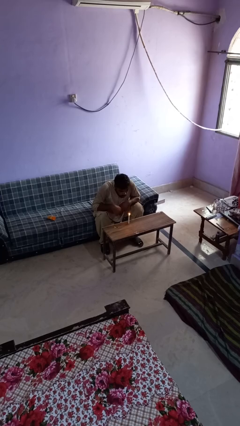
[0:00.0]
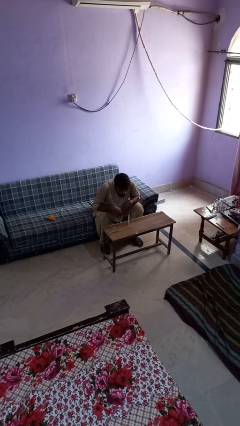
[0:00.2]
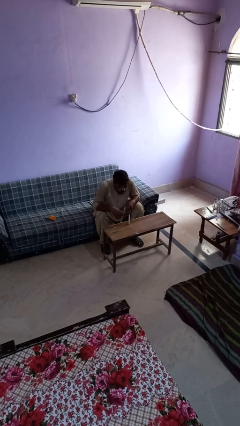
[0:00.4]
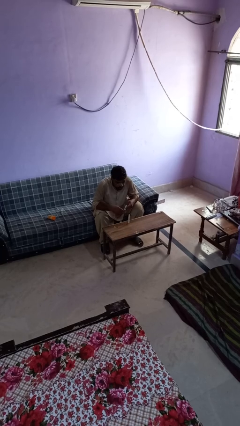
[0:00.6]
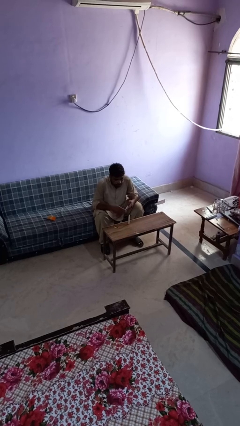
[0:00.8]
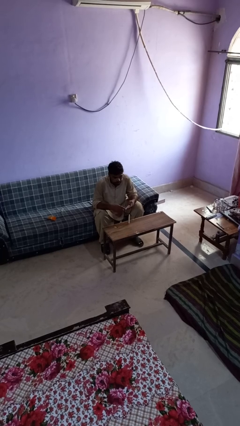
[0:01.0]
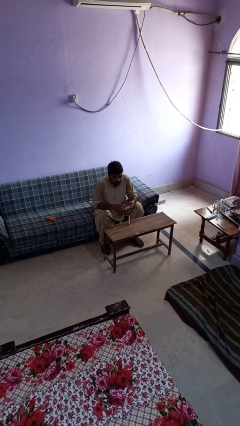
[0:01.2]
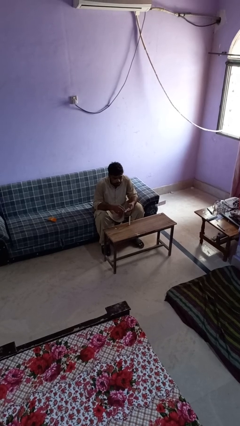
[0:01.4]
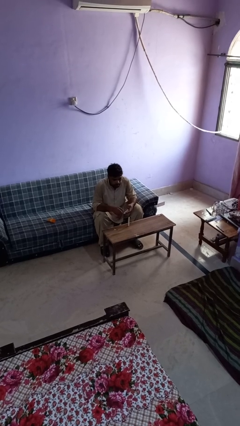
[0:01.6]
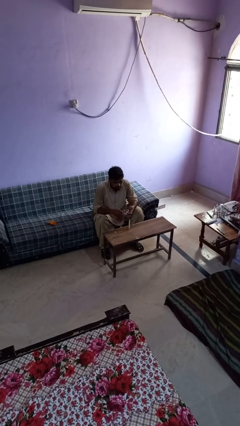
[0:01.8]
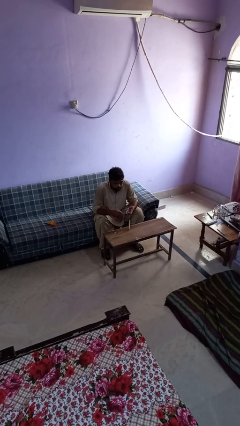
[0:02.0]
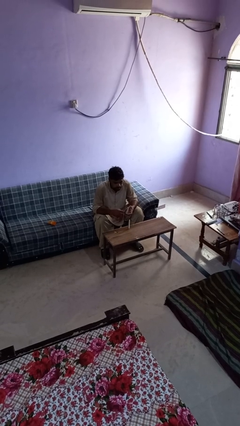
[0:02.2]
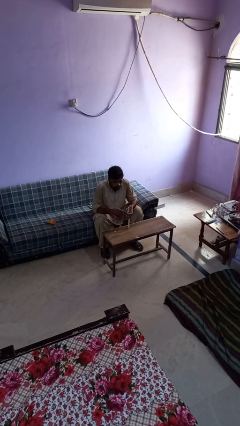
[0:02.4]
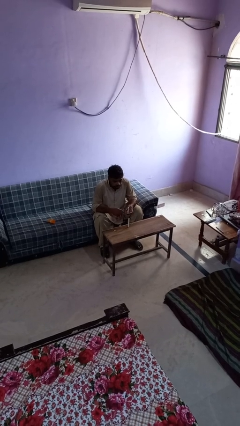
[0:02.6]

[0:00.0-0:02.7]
person extinguishes candle

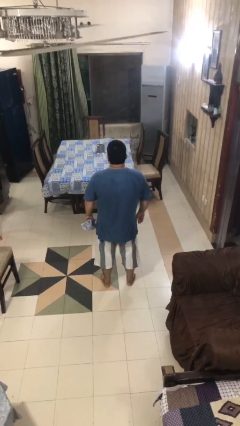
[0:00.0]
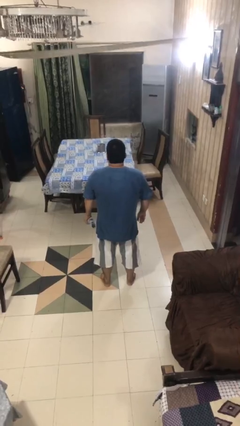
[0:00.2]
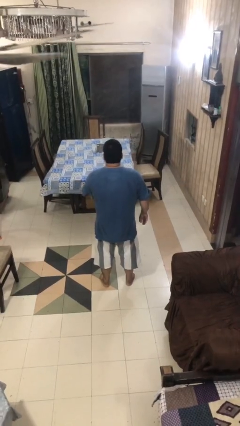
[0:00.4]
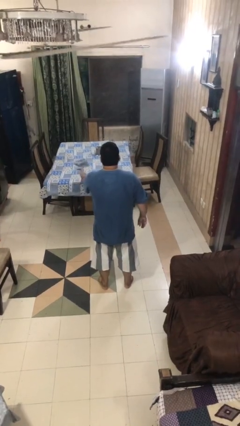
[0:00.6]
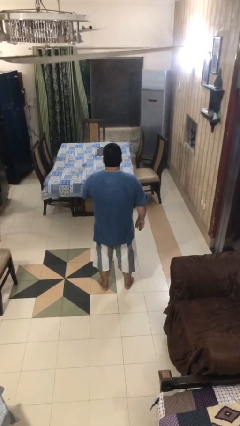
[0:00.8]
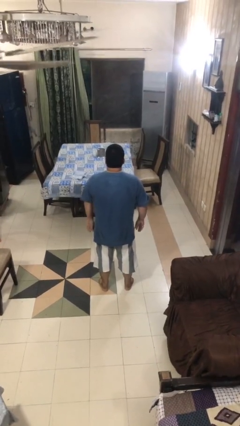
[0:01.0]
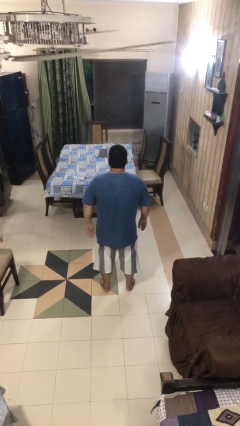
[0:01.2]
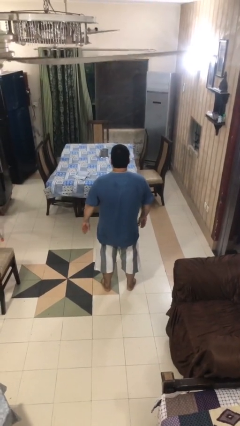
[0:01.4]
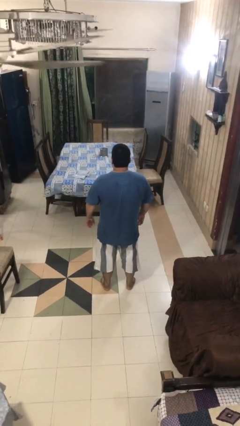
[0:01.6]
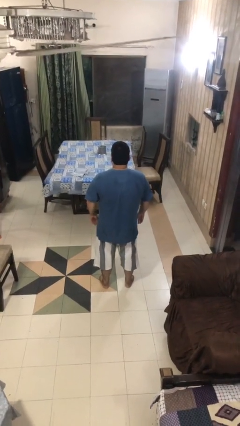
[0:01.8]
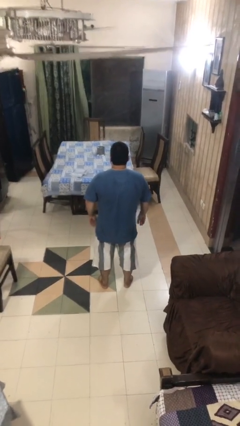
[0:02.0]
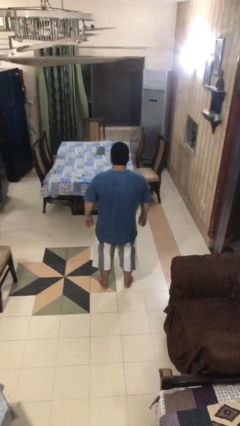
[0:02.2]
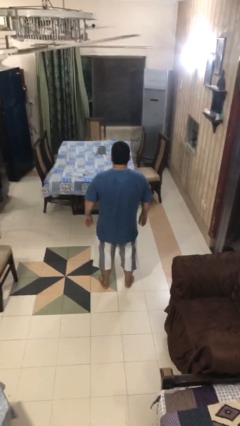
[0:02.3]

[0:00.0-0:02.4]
person throws object on table

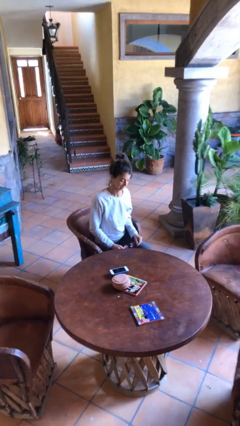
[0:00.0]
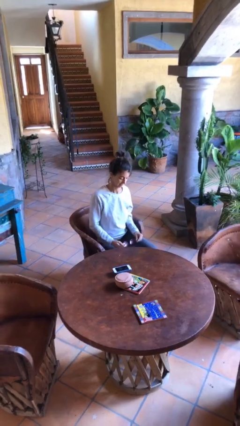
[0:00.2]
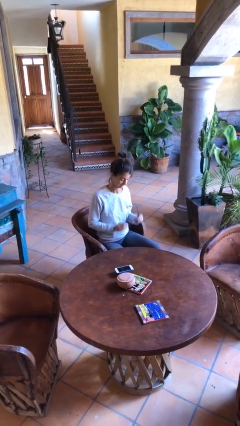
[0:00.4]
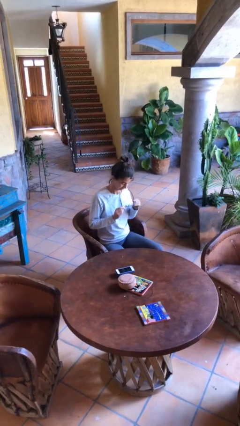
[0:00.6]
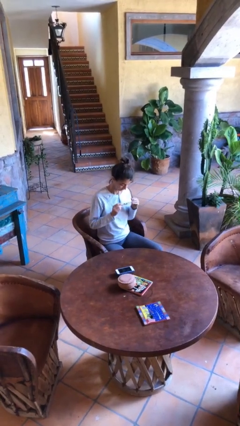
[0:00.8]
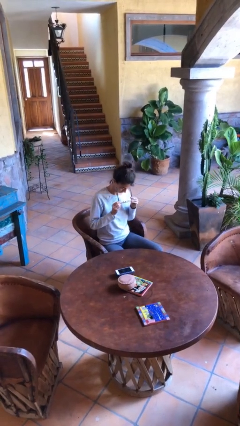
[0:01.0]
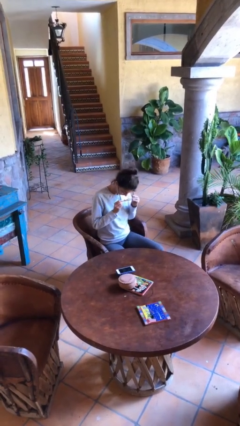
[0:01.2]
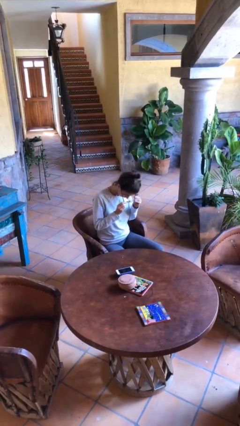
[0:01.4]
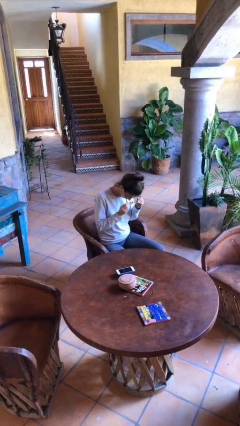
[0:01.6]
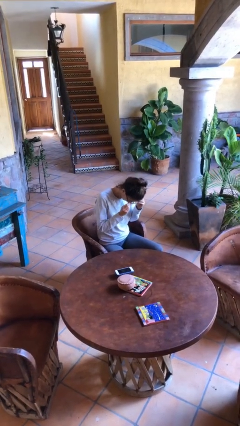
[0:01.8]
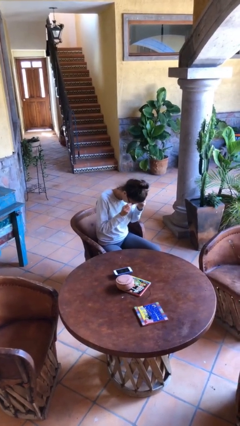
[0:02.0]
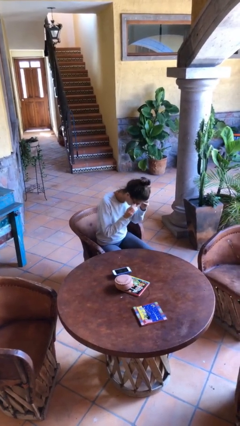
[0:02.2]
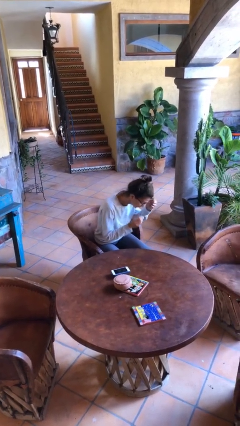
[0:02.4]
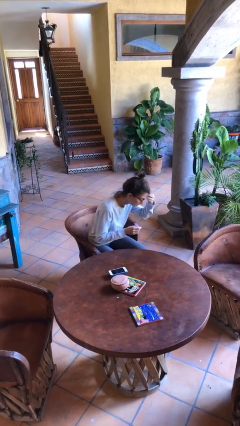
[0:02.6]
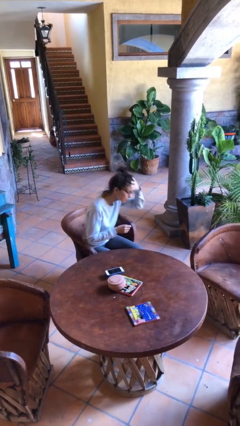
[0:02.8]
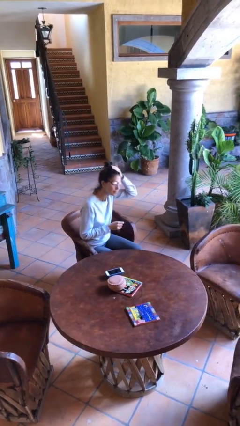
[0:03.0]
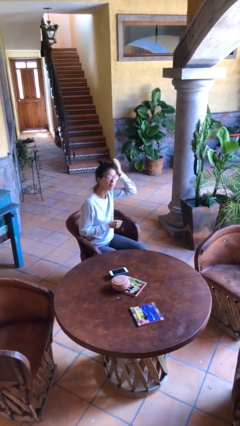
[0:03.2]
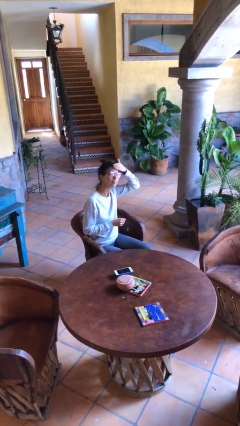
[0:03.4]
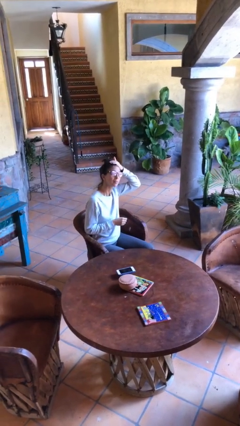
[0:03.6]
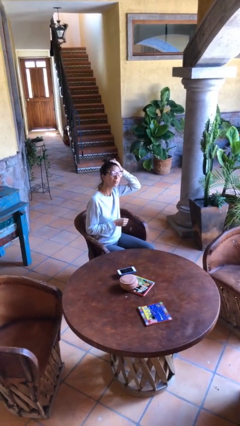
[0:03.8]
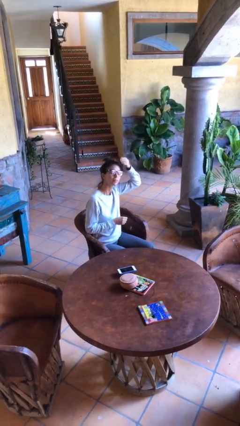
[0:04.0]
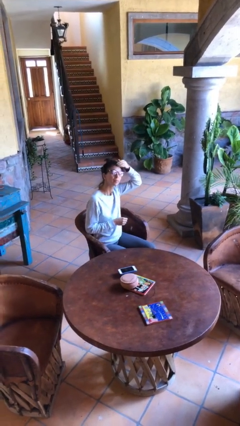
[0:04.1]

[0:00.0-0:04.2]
person puts on glasses

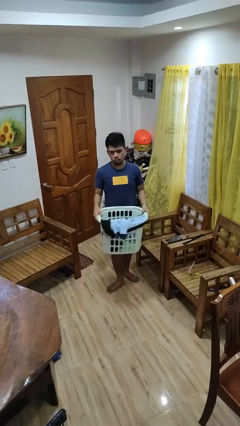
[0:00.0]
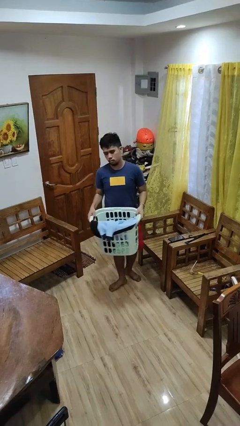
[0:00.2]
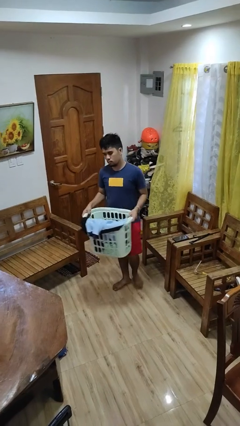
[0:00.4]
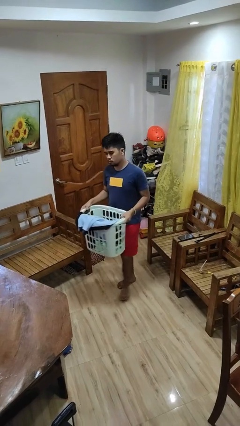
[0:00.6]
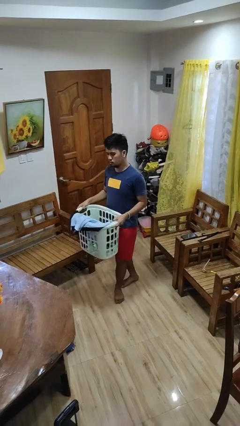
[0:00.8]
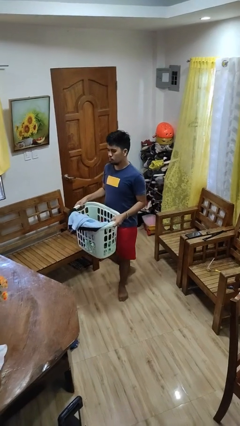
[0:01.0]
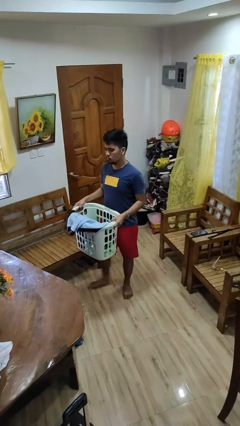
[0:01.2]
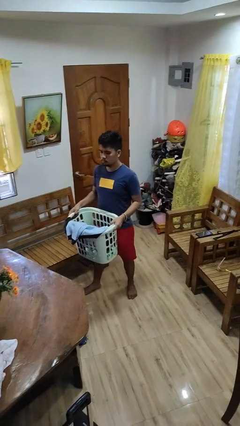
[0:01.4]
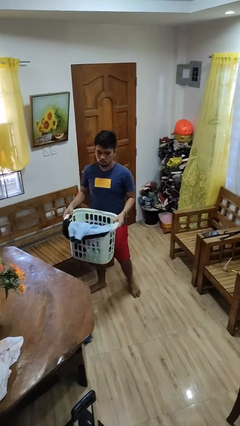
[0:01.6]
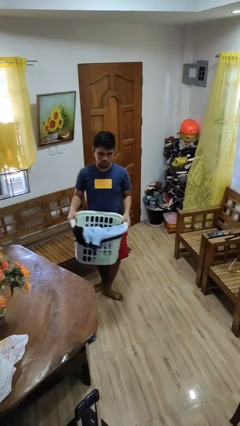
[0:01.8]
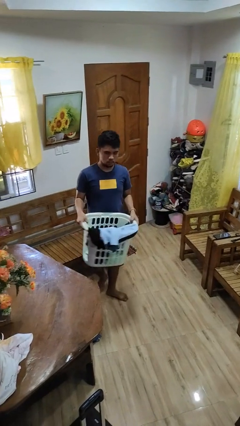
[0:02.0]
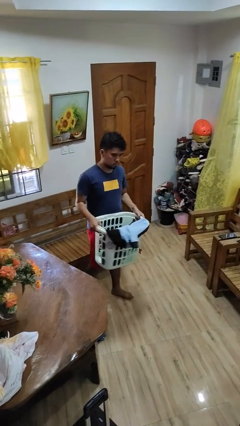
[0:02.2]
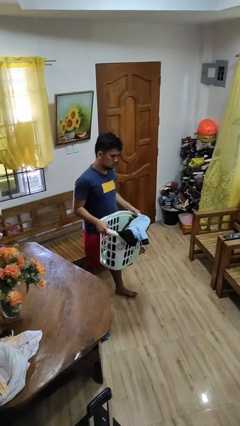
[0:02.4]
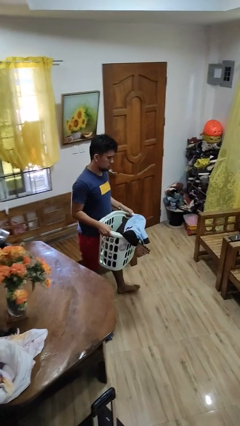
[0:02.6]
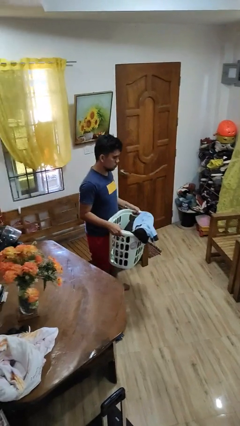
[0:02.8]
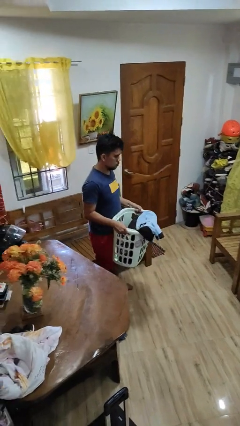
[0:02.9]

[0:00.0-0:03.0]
person carries laundry basket

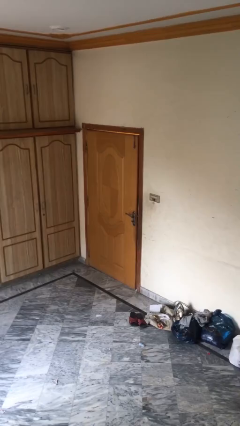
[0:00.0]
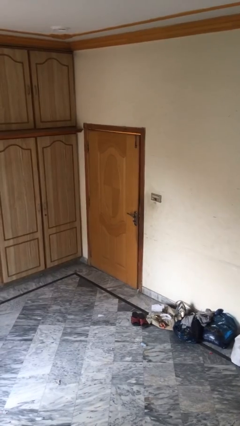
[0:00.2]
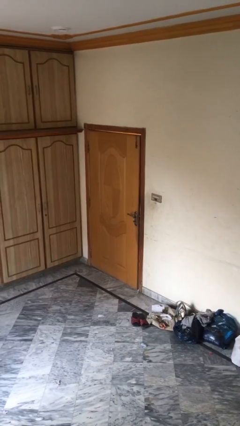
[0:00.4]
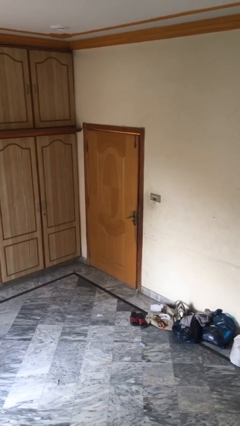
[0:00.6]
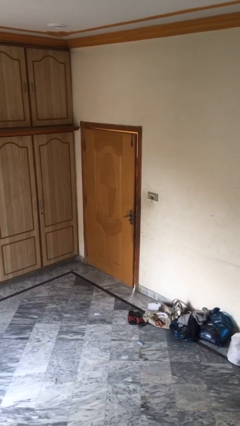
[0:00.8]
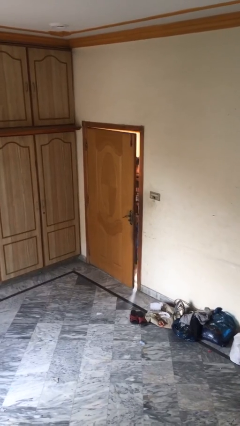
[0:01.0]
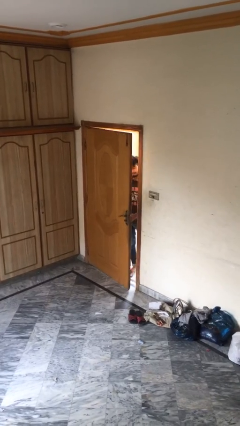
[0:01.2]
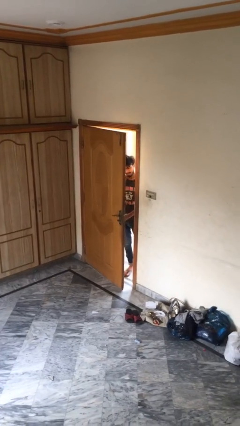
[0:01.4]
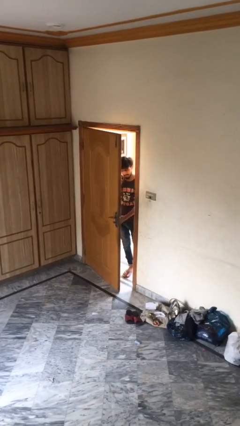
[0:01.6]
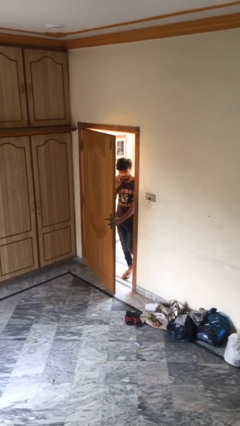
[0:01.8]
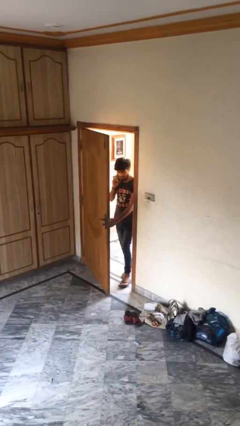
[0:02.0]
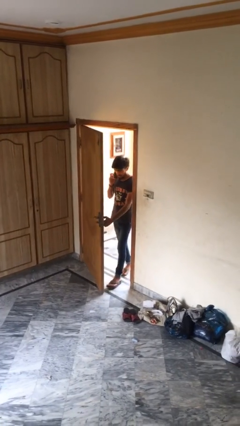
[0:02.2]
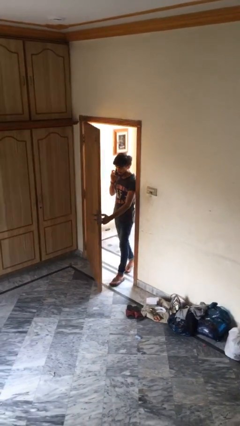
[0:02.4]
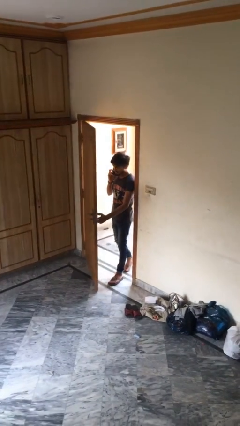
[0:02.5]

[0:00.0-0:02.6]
person opens facility door

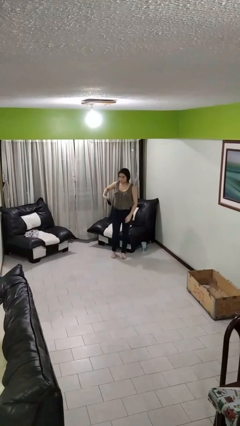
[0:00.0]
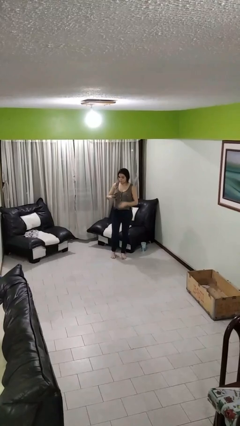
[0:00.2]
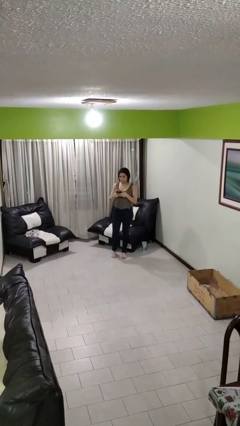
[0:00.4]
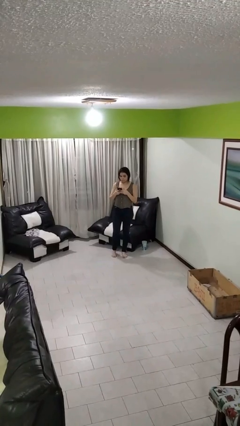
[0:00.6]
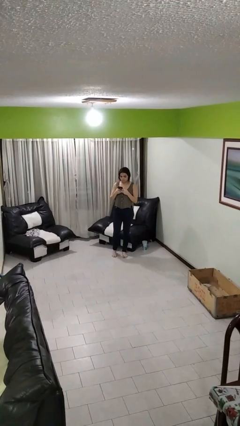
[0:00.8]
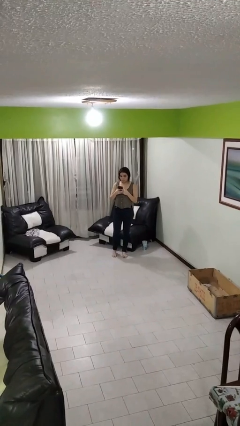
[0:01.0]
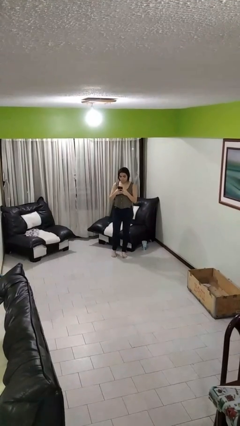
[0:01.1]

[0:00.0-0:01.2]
person takes phone from pocket

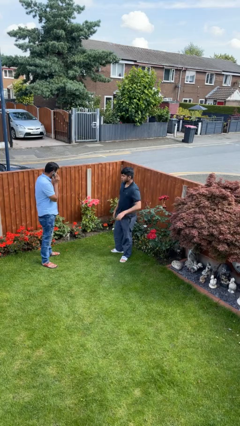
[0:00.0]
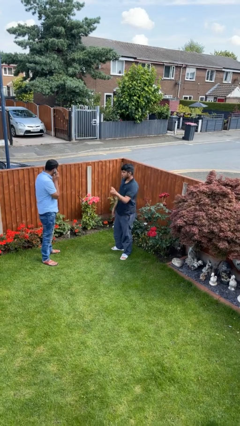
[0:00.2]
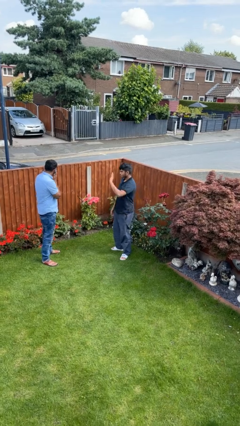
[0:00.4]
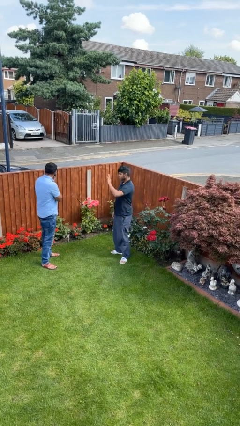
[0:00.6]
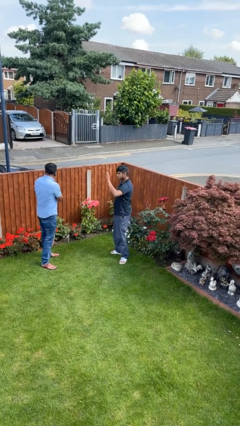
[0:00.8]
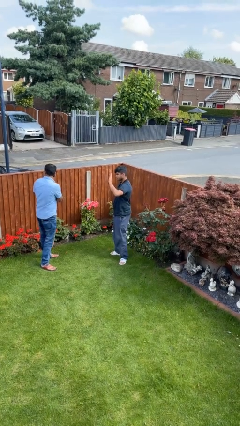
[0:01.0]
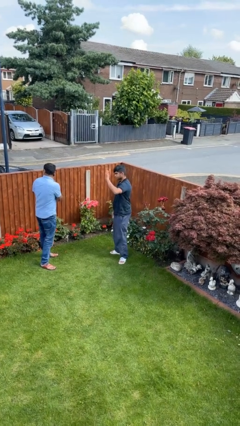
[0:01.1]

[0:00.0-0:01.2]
person waves at person
